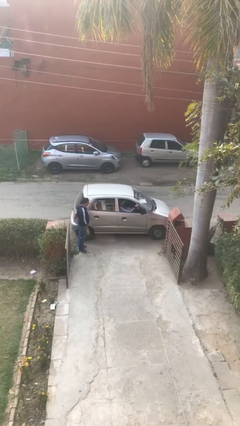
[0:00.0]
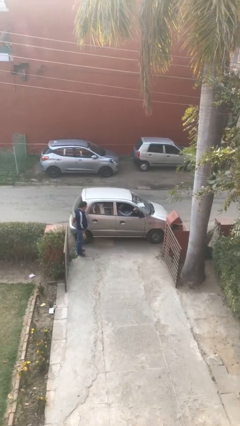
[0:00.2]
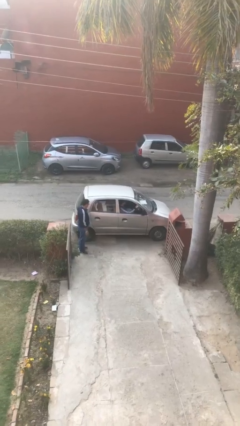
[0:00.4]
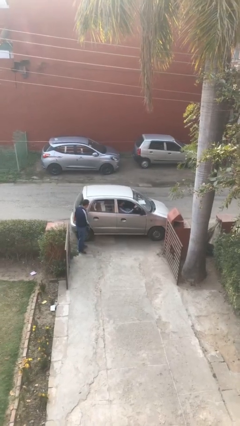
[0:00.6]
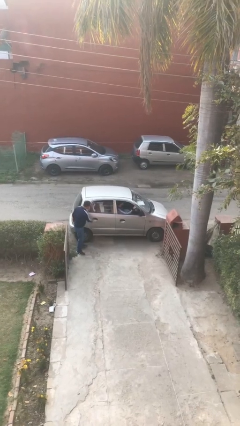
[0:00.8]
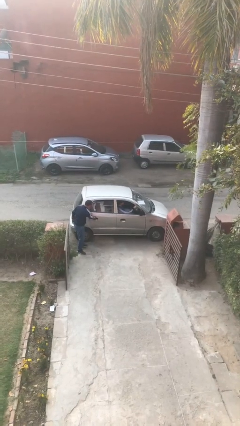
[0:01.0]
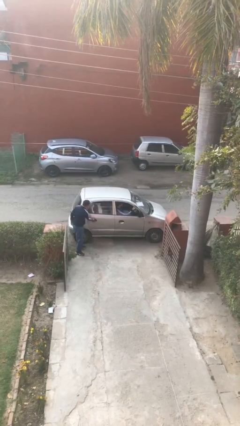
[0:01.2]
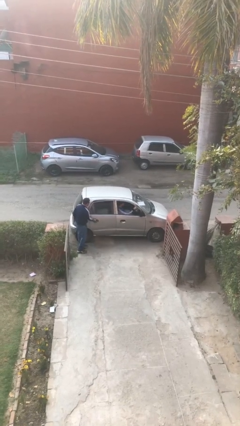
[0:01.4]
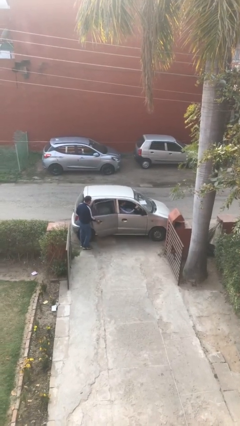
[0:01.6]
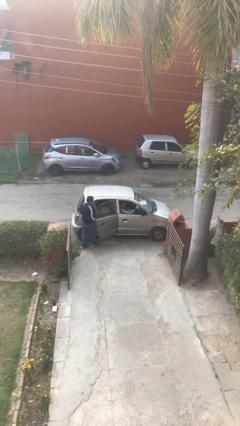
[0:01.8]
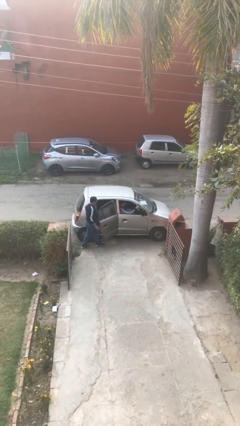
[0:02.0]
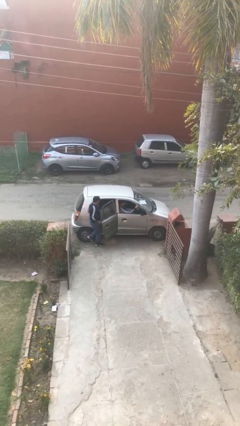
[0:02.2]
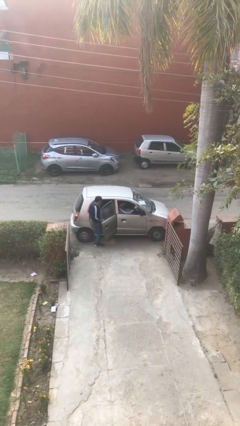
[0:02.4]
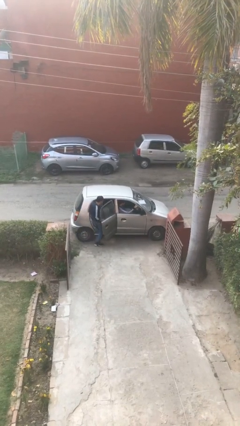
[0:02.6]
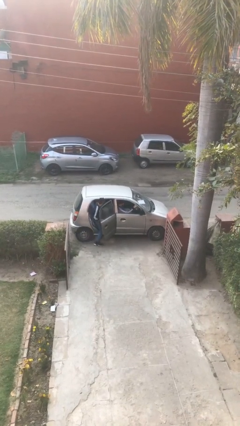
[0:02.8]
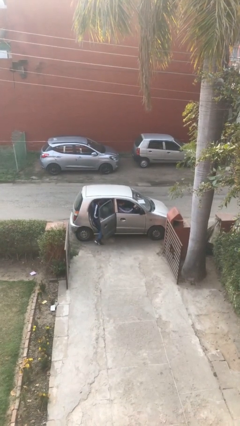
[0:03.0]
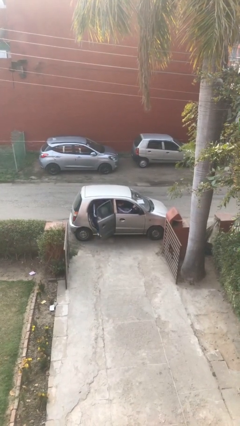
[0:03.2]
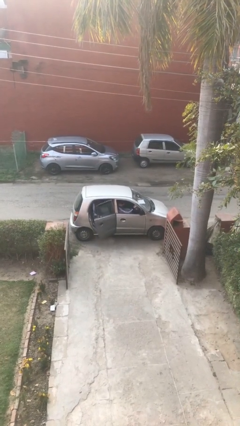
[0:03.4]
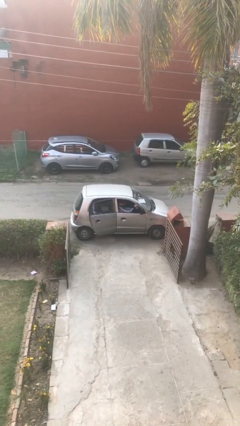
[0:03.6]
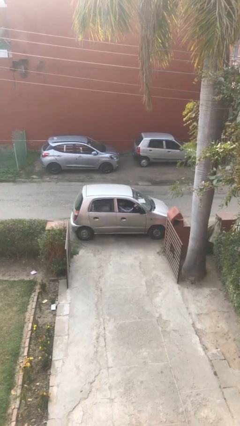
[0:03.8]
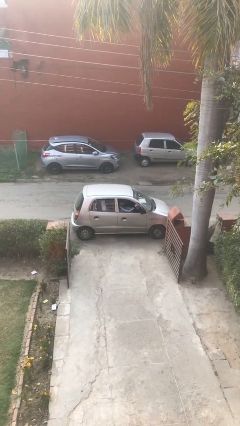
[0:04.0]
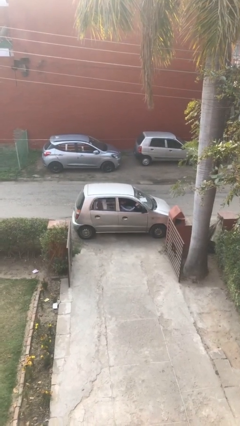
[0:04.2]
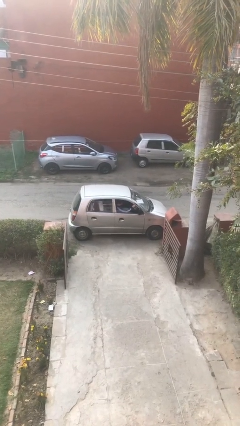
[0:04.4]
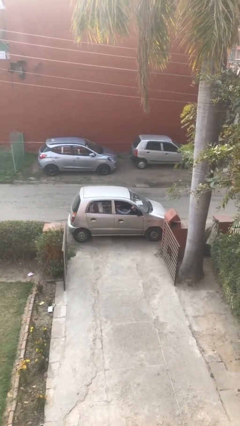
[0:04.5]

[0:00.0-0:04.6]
car picks up person

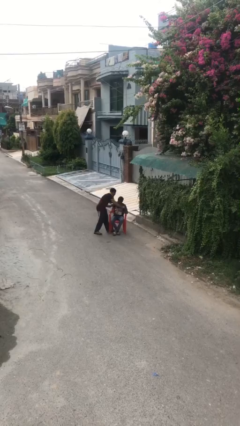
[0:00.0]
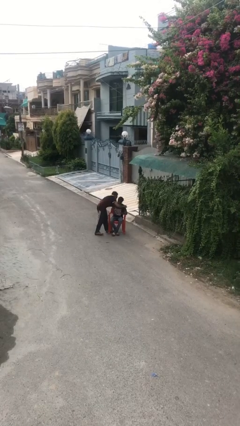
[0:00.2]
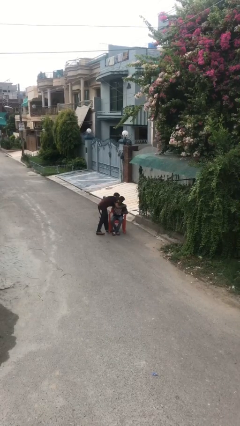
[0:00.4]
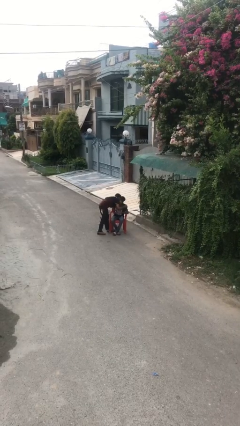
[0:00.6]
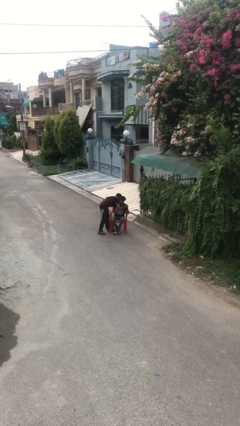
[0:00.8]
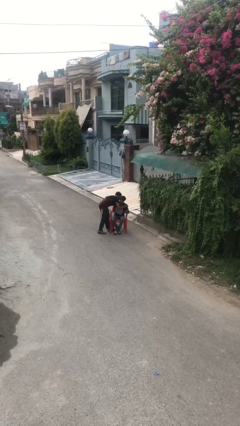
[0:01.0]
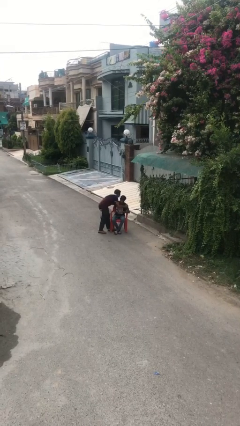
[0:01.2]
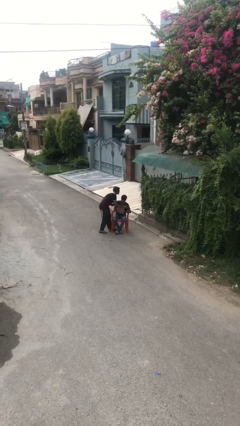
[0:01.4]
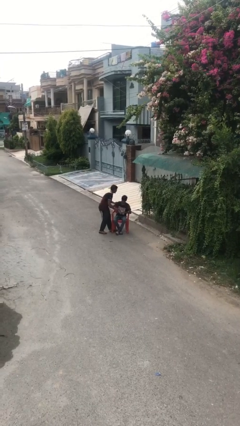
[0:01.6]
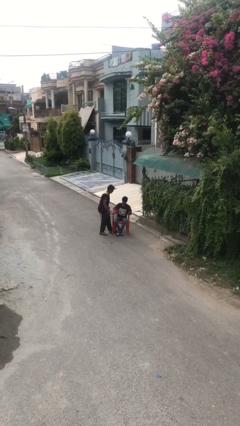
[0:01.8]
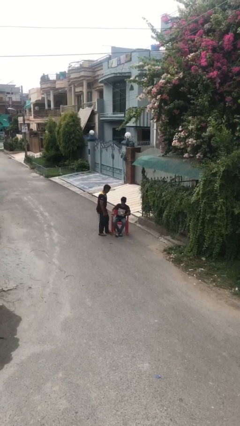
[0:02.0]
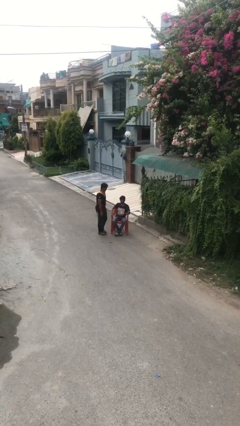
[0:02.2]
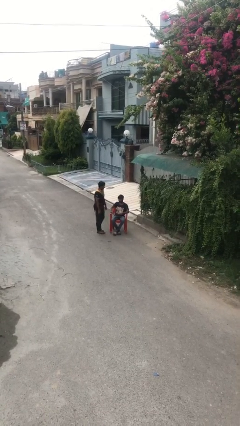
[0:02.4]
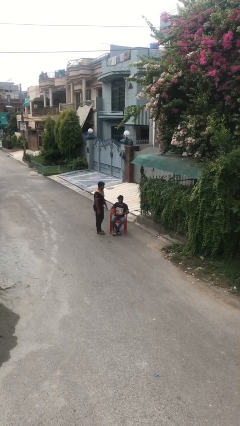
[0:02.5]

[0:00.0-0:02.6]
person embraces person

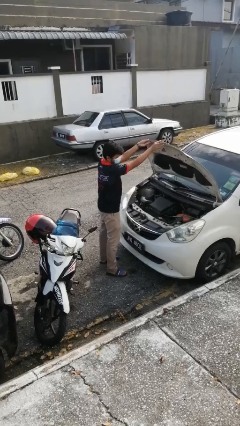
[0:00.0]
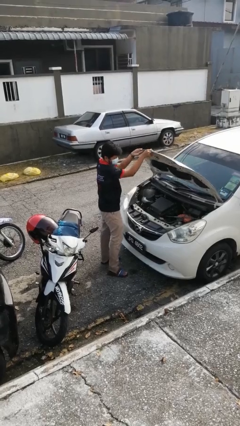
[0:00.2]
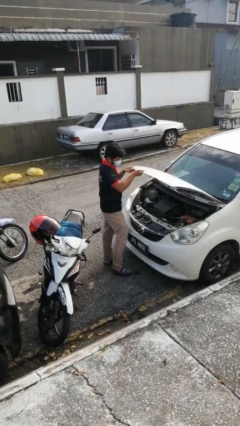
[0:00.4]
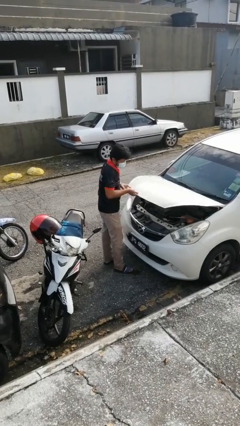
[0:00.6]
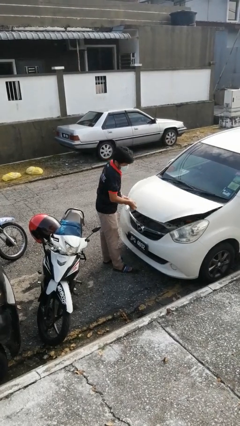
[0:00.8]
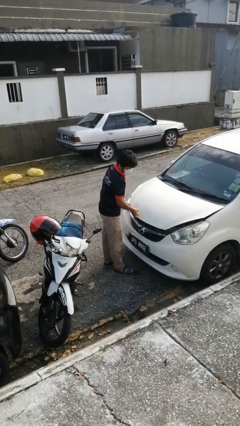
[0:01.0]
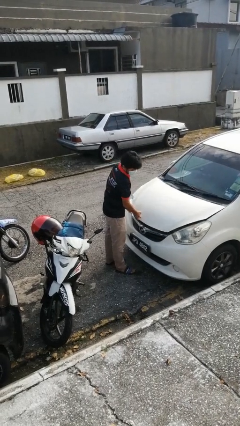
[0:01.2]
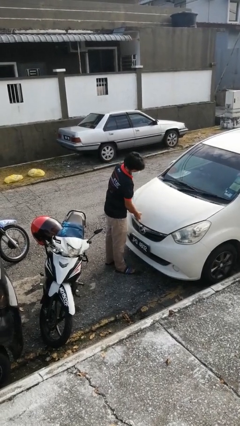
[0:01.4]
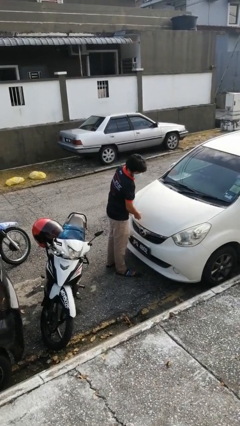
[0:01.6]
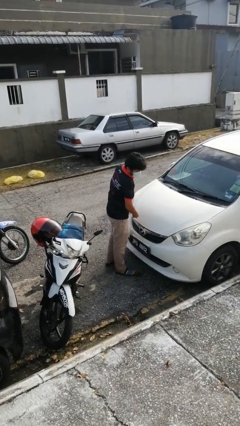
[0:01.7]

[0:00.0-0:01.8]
person closes car hood

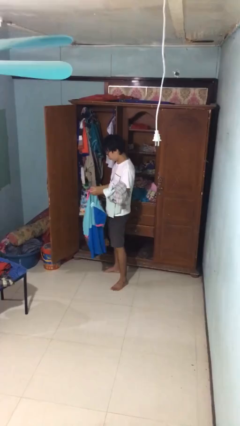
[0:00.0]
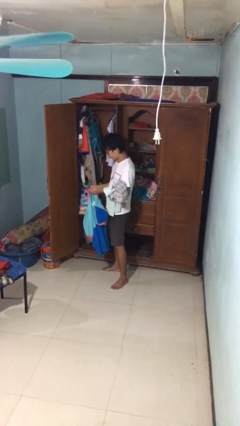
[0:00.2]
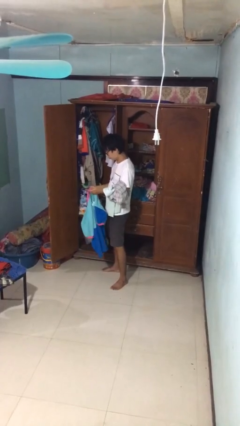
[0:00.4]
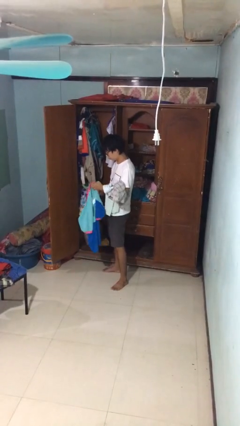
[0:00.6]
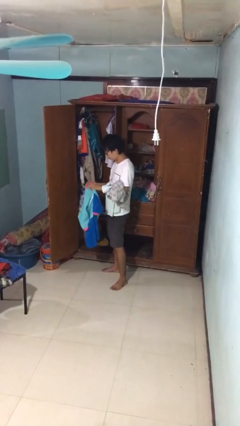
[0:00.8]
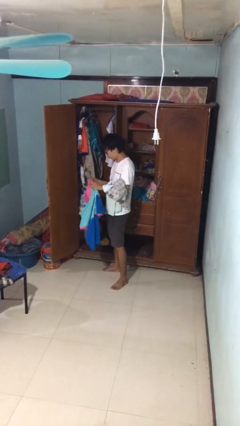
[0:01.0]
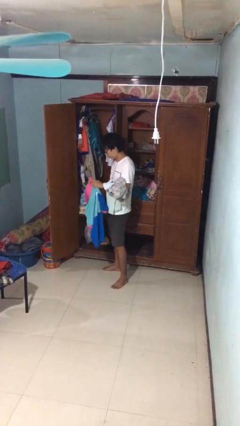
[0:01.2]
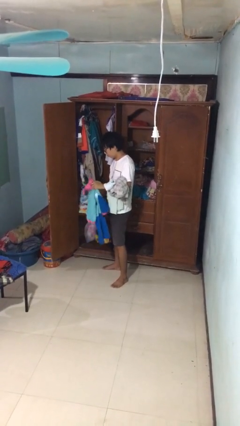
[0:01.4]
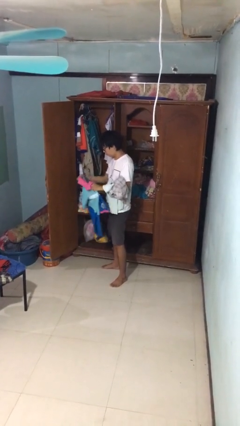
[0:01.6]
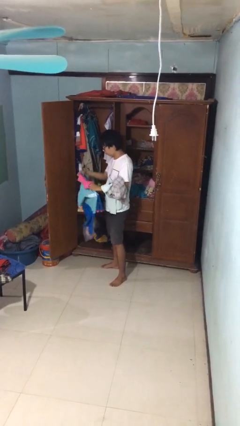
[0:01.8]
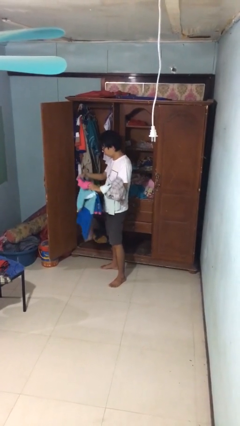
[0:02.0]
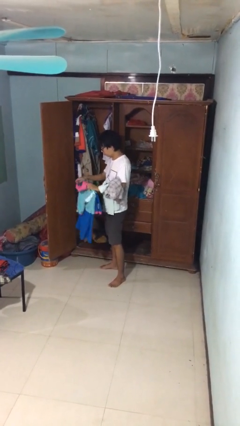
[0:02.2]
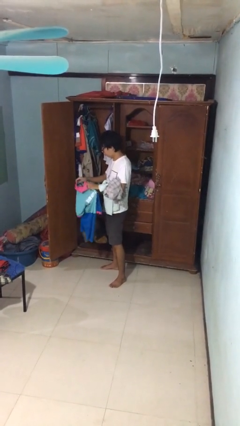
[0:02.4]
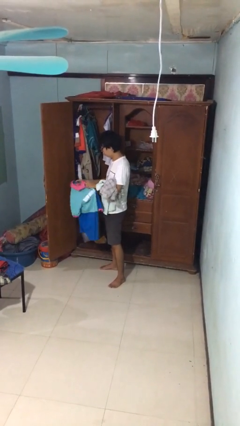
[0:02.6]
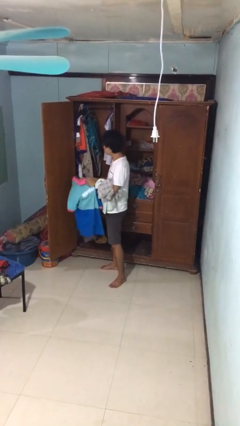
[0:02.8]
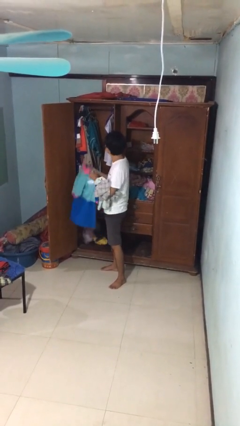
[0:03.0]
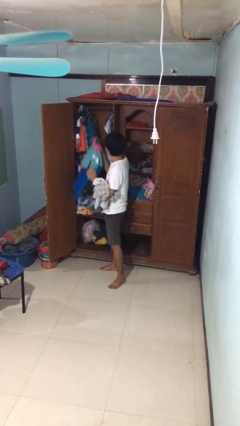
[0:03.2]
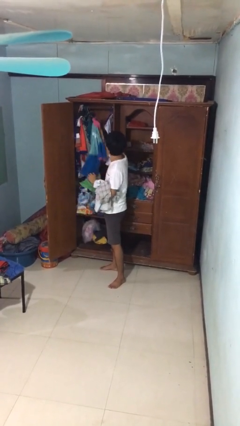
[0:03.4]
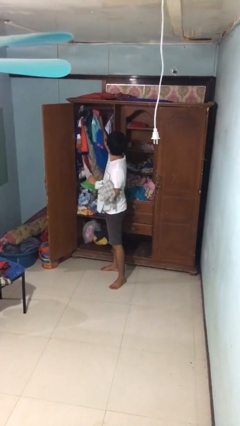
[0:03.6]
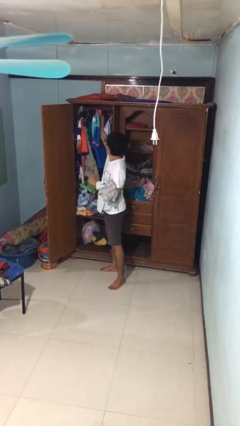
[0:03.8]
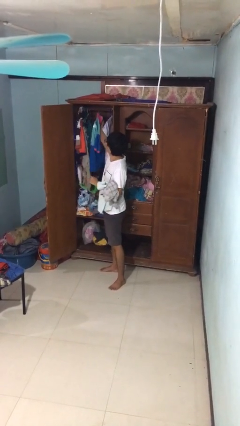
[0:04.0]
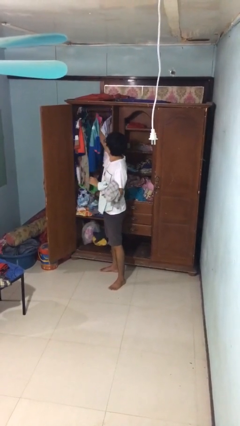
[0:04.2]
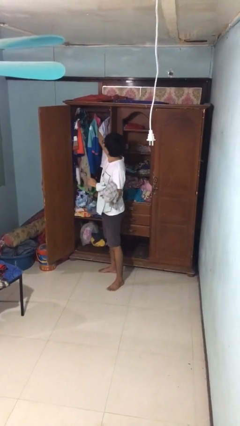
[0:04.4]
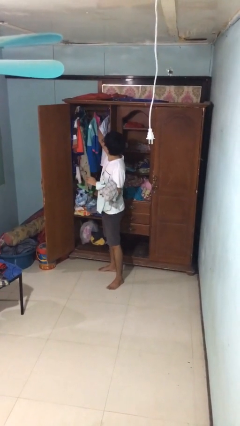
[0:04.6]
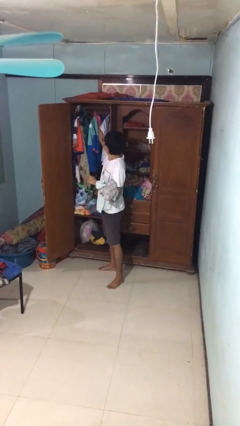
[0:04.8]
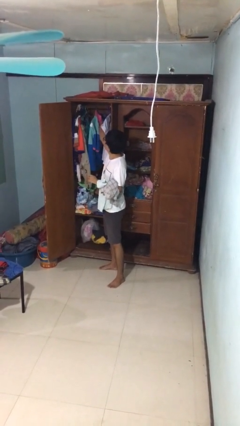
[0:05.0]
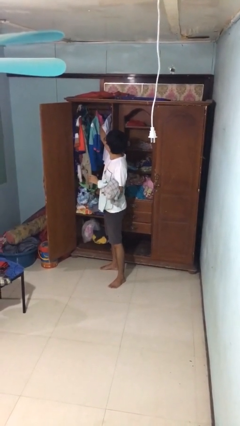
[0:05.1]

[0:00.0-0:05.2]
person puts clothes into closet

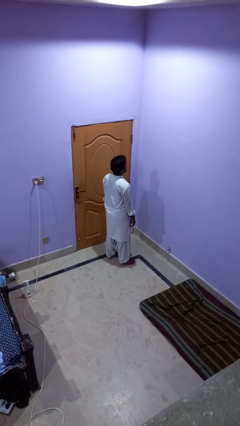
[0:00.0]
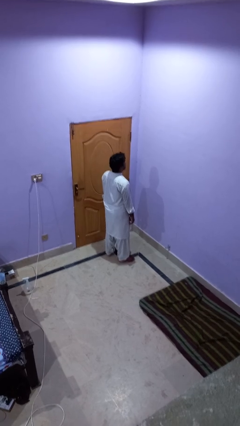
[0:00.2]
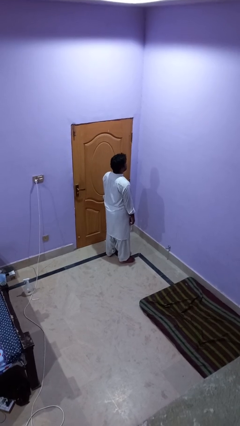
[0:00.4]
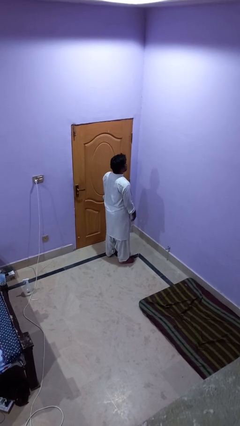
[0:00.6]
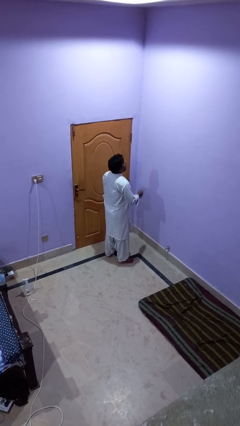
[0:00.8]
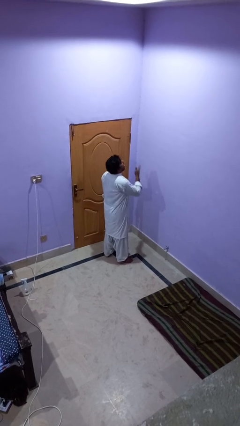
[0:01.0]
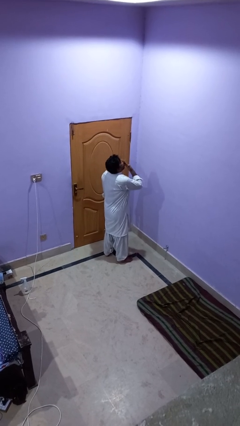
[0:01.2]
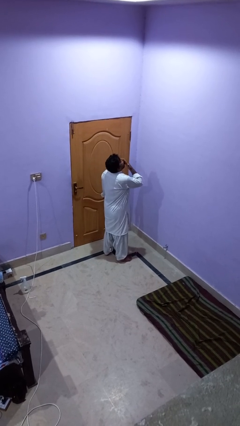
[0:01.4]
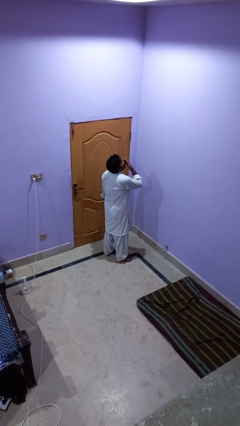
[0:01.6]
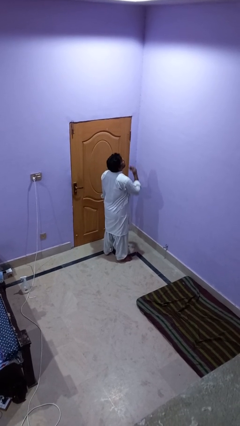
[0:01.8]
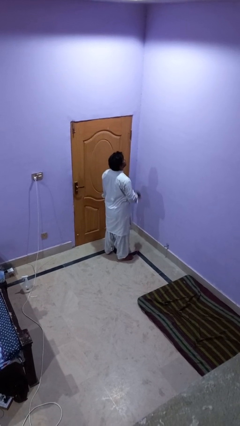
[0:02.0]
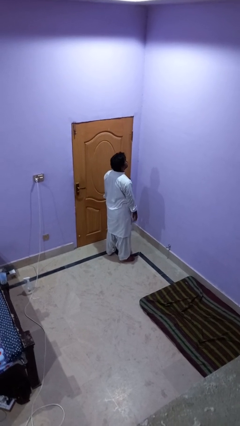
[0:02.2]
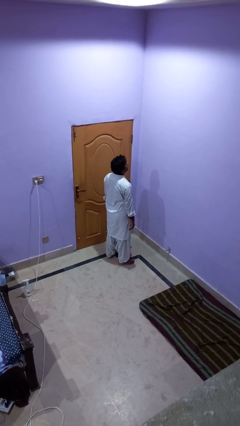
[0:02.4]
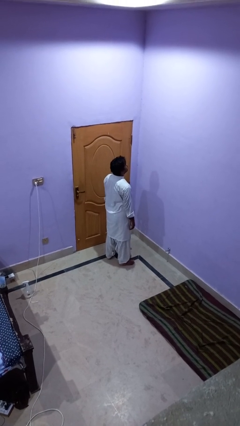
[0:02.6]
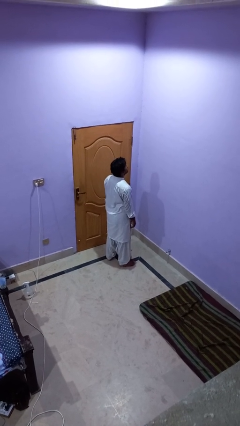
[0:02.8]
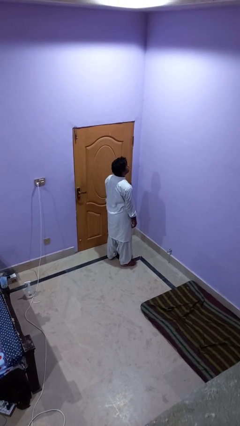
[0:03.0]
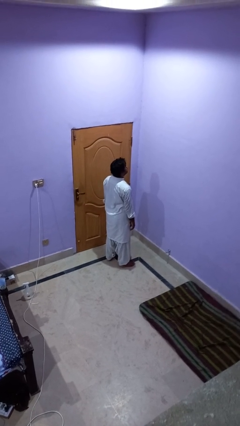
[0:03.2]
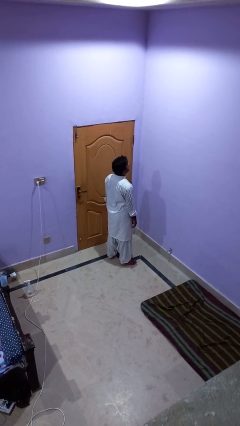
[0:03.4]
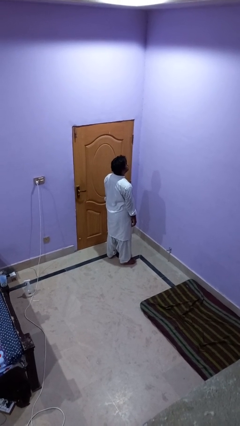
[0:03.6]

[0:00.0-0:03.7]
person yawns
